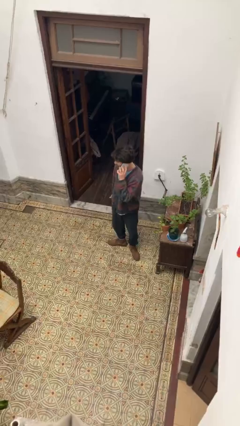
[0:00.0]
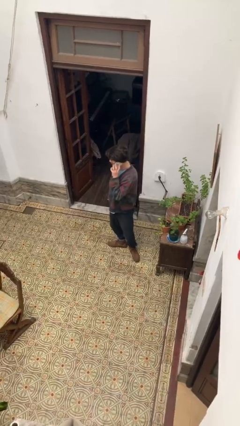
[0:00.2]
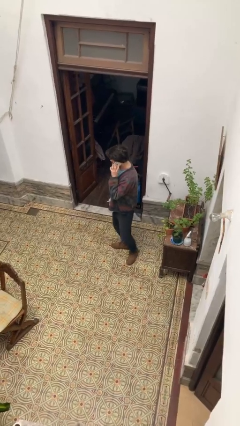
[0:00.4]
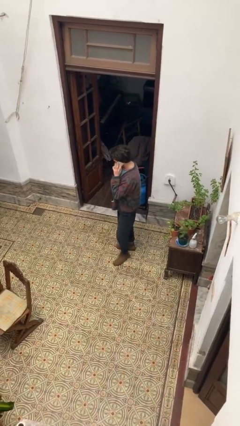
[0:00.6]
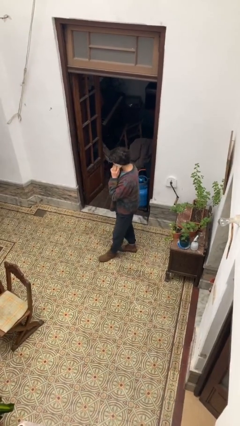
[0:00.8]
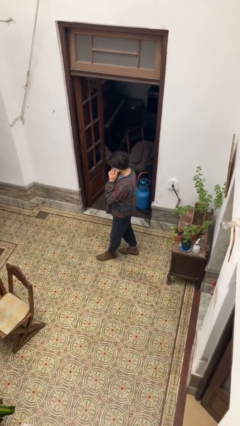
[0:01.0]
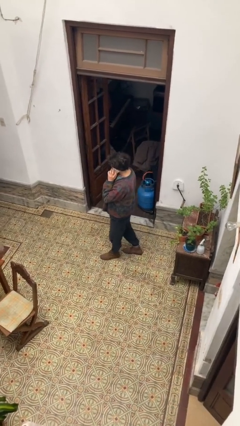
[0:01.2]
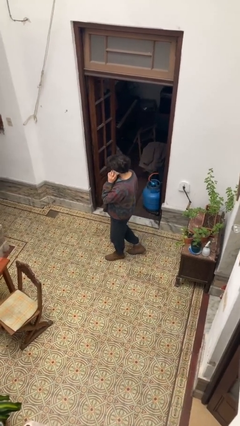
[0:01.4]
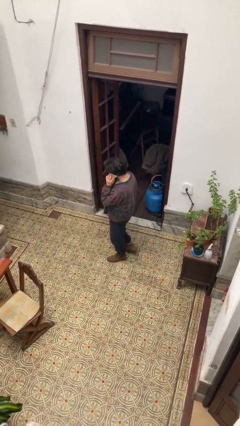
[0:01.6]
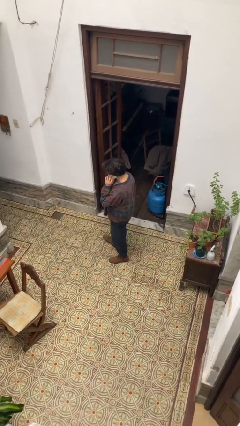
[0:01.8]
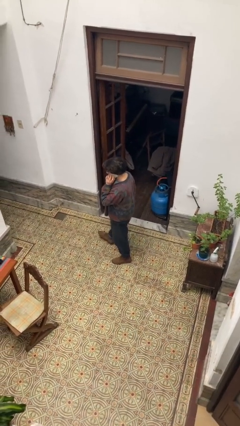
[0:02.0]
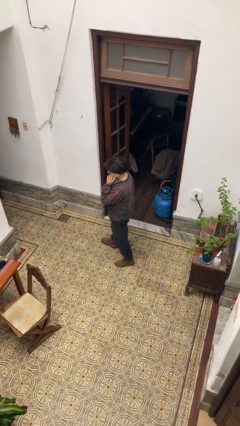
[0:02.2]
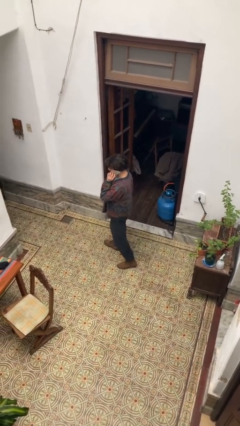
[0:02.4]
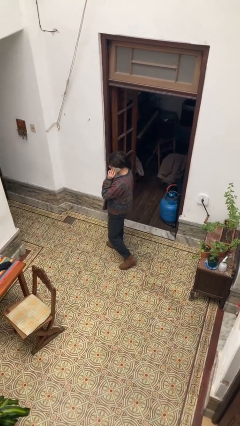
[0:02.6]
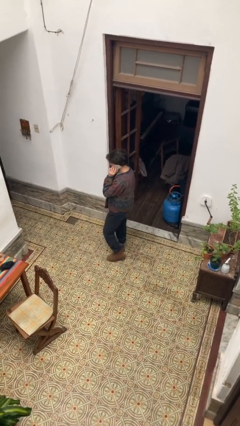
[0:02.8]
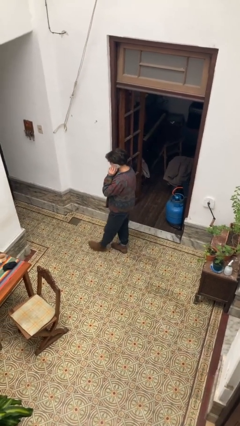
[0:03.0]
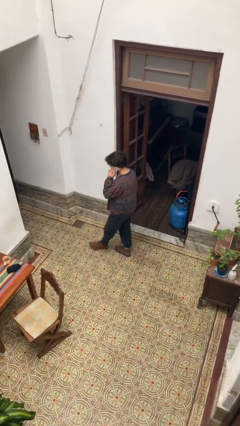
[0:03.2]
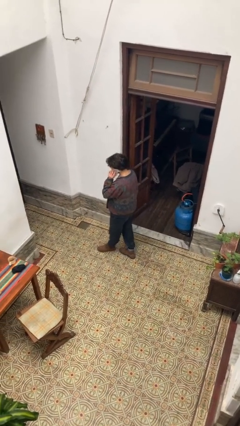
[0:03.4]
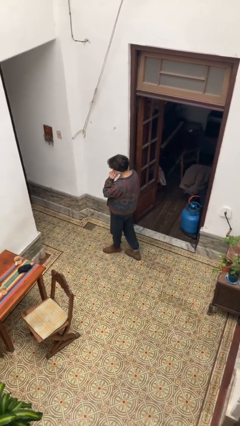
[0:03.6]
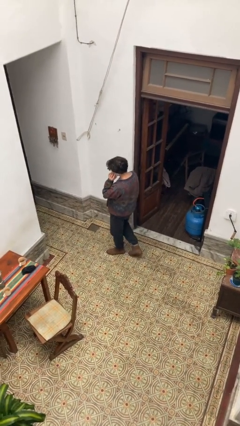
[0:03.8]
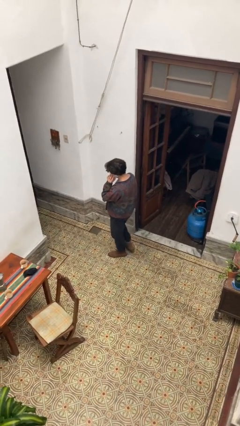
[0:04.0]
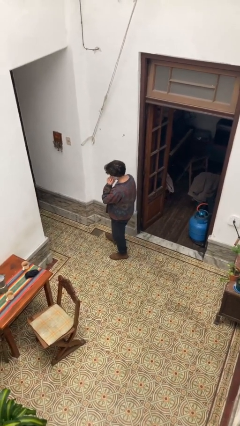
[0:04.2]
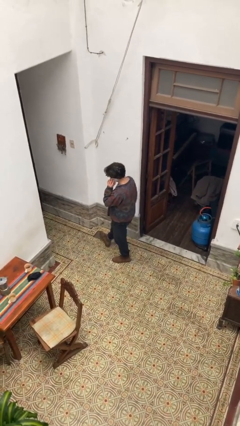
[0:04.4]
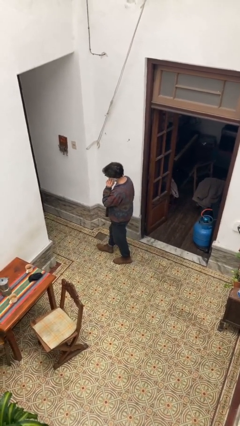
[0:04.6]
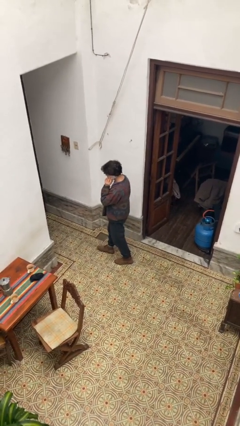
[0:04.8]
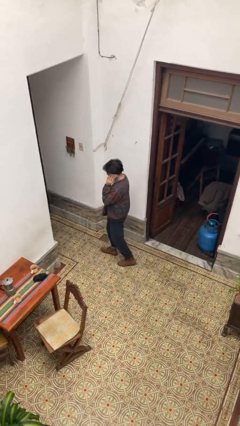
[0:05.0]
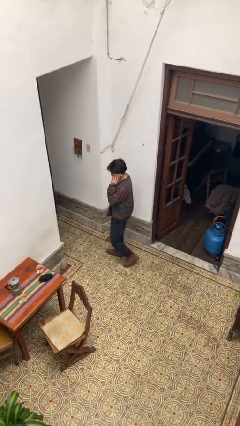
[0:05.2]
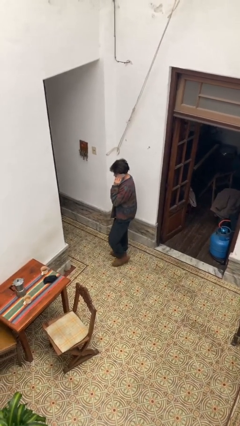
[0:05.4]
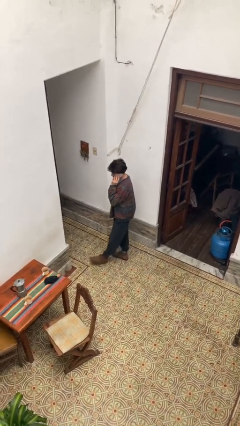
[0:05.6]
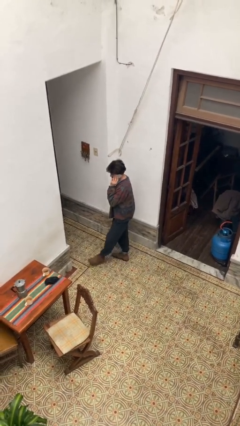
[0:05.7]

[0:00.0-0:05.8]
person talks on phone

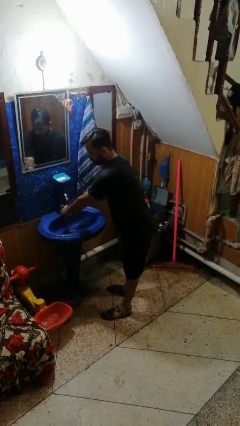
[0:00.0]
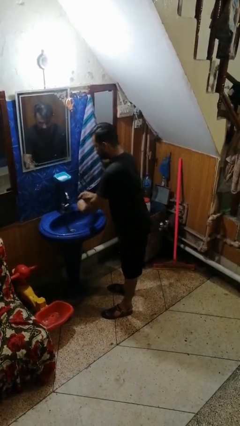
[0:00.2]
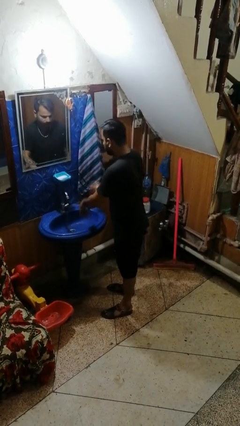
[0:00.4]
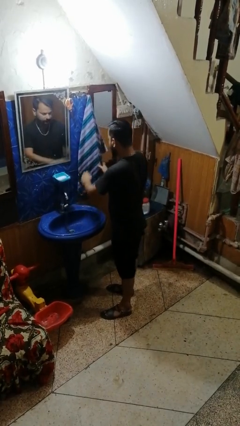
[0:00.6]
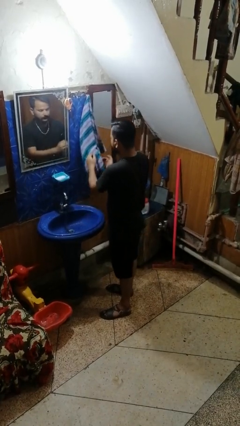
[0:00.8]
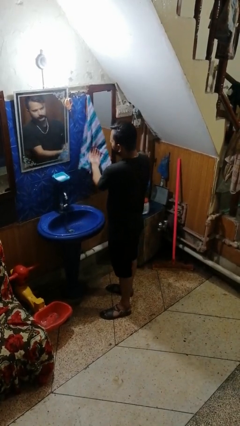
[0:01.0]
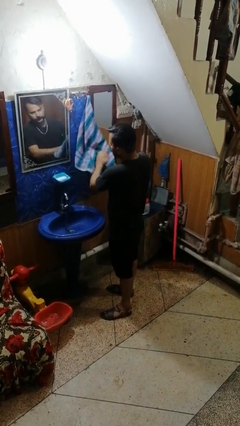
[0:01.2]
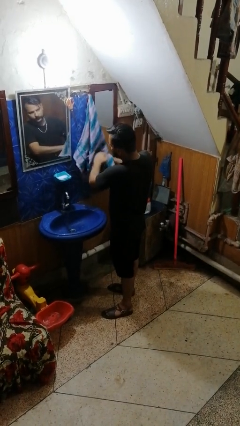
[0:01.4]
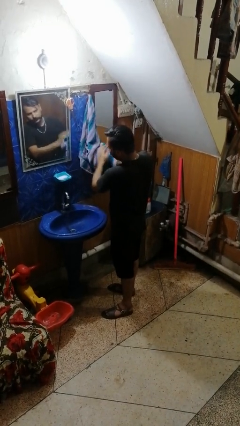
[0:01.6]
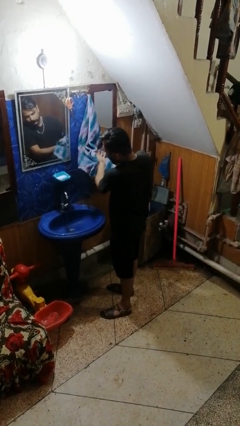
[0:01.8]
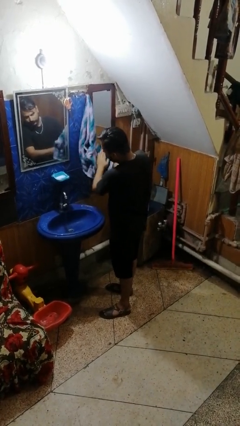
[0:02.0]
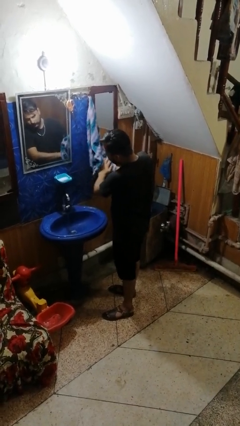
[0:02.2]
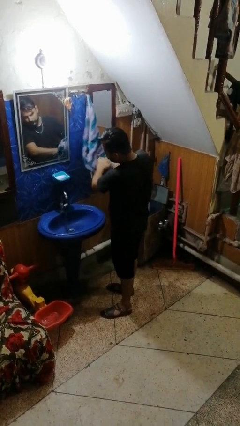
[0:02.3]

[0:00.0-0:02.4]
person dries hands with towel

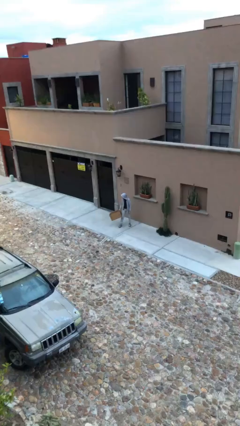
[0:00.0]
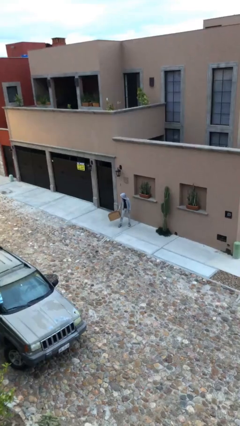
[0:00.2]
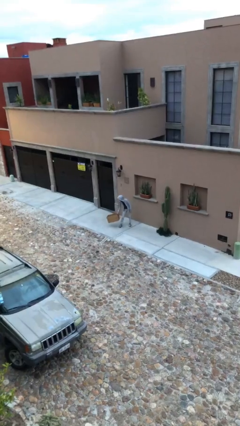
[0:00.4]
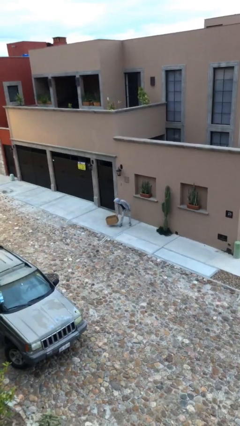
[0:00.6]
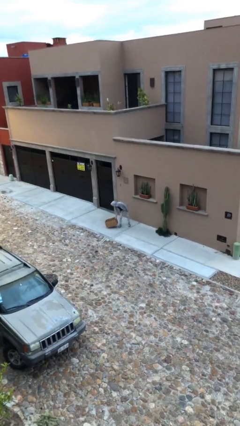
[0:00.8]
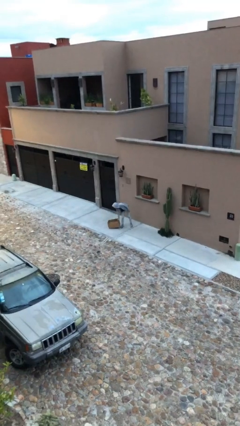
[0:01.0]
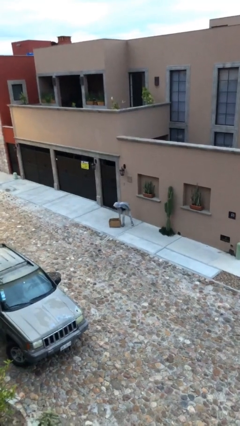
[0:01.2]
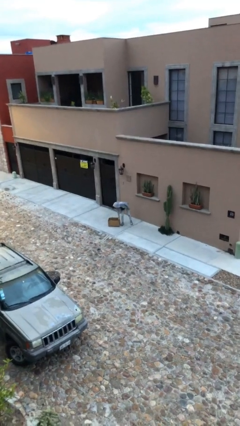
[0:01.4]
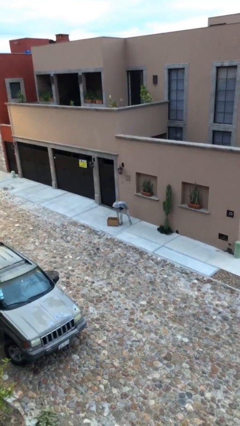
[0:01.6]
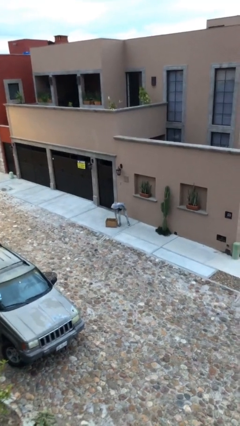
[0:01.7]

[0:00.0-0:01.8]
person puts down object on floor

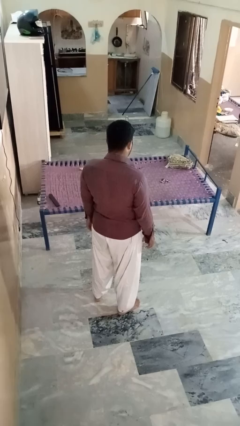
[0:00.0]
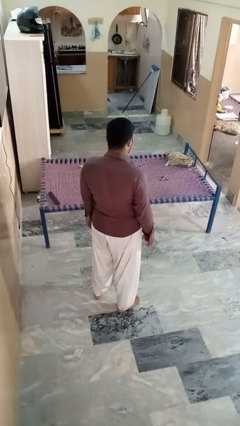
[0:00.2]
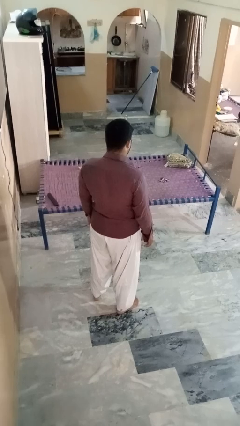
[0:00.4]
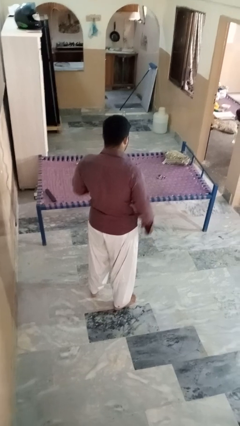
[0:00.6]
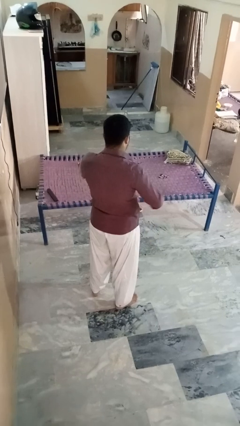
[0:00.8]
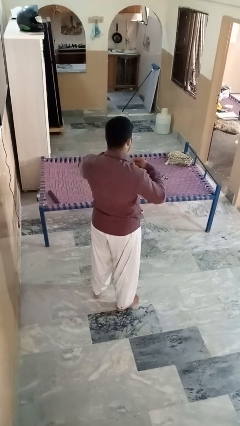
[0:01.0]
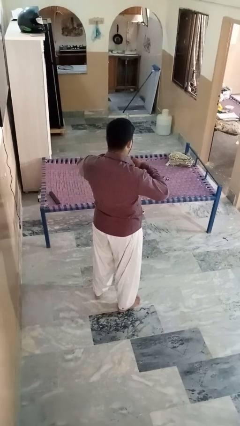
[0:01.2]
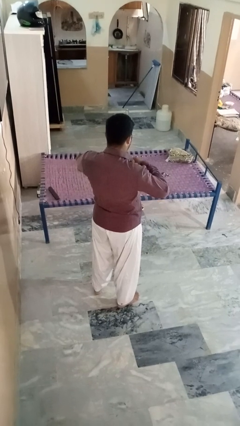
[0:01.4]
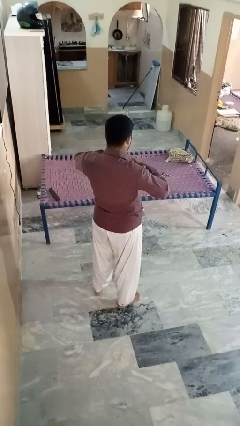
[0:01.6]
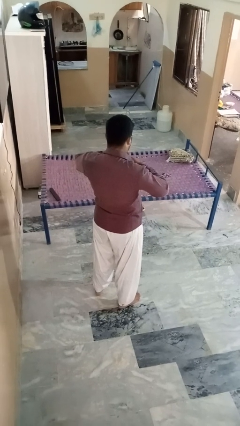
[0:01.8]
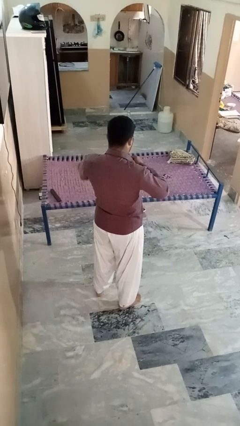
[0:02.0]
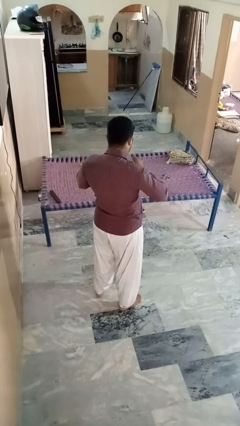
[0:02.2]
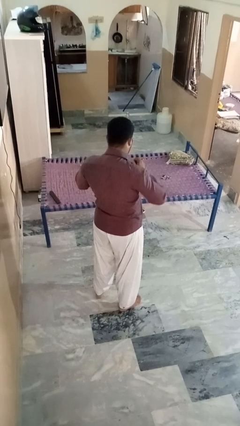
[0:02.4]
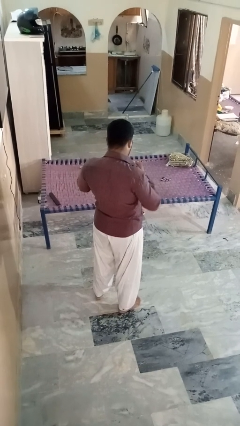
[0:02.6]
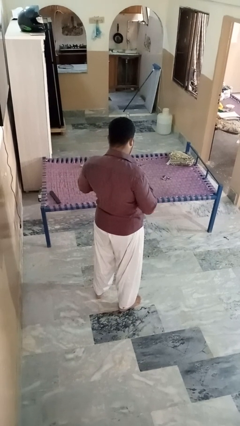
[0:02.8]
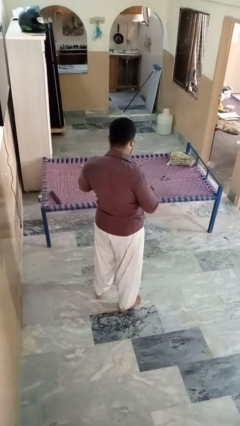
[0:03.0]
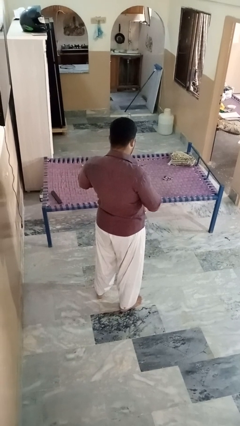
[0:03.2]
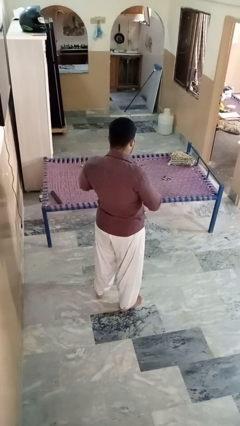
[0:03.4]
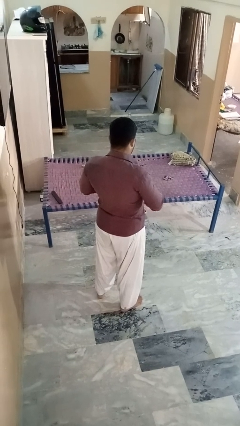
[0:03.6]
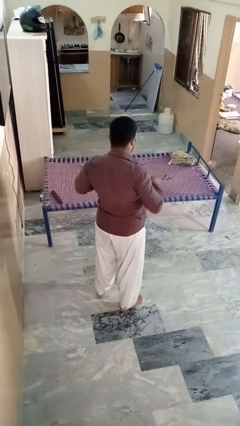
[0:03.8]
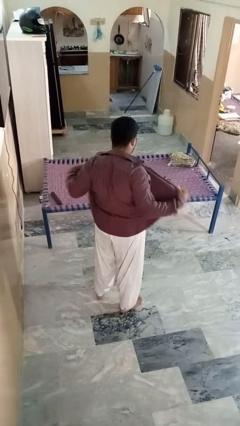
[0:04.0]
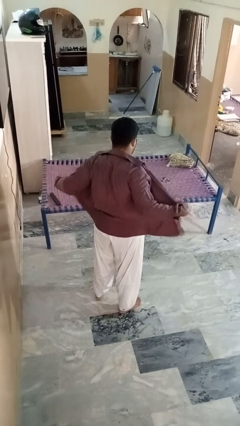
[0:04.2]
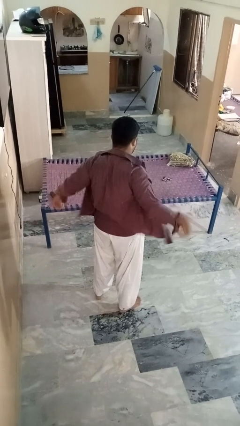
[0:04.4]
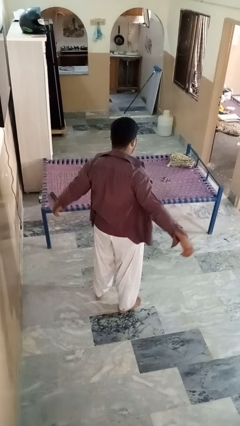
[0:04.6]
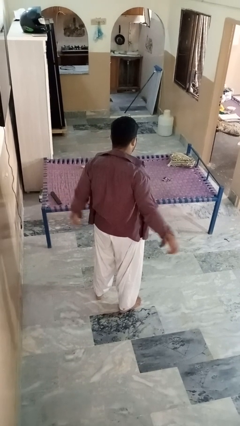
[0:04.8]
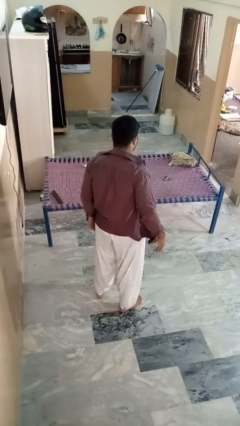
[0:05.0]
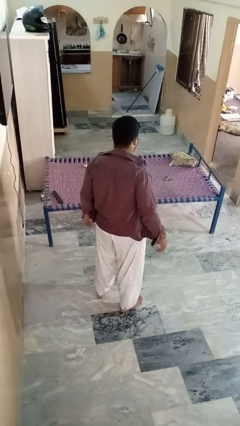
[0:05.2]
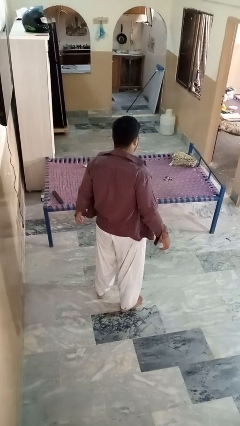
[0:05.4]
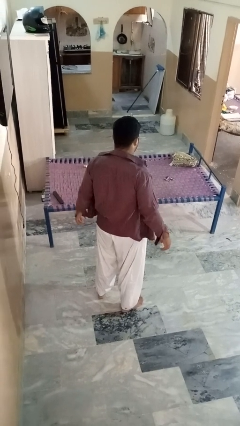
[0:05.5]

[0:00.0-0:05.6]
person unbuttons shirt

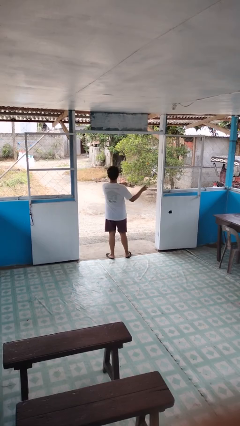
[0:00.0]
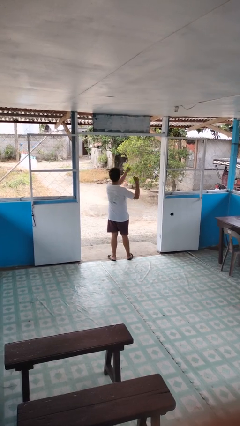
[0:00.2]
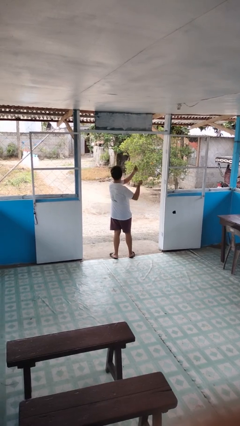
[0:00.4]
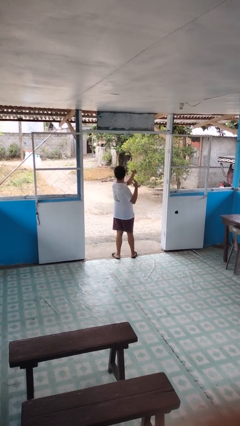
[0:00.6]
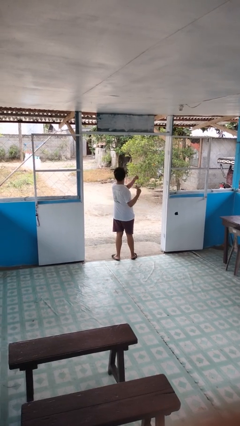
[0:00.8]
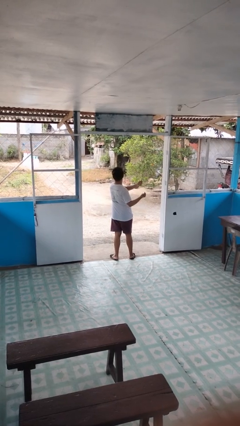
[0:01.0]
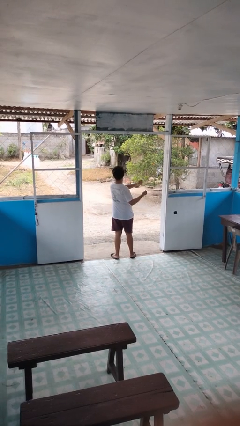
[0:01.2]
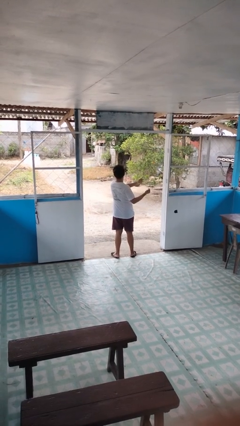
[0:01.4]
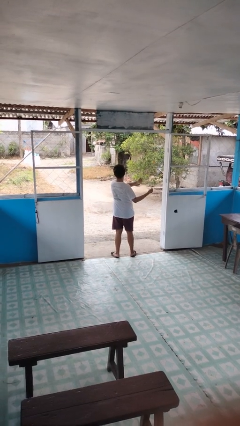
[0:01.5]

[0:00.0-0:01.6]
person snaps fingers

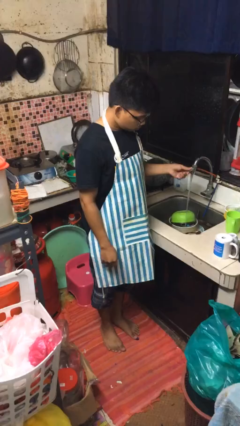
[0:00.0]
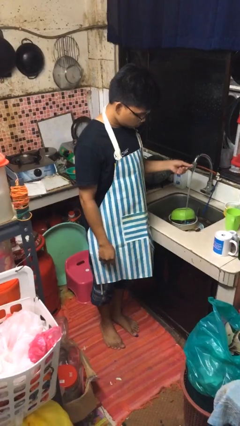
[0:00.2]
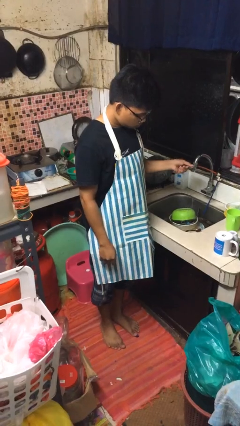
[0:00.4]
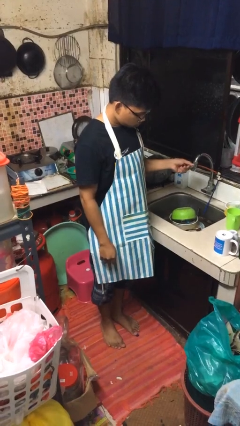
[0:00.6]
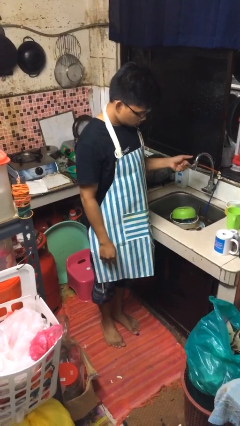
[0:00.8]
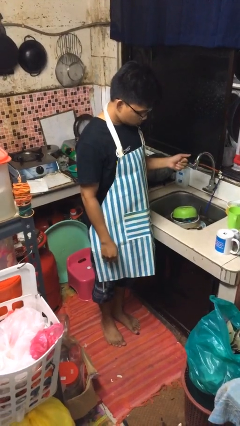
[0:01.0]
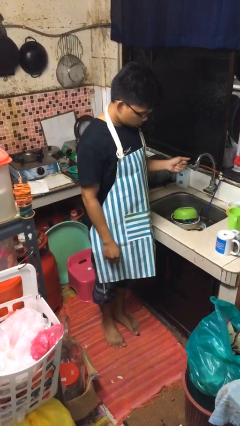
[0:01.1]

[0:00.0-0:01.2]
person turns off faucet
